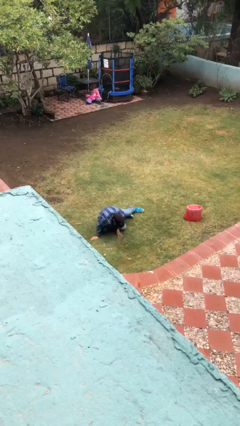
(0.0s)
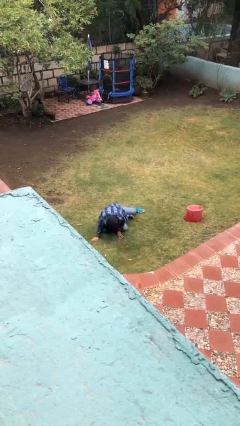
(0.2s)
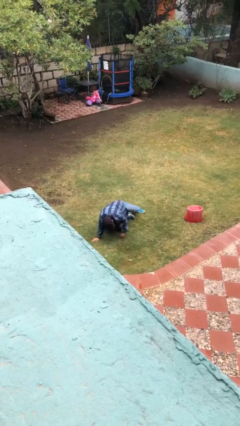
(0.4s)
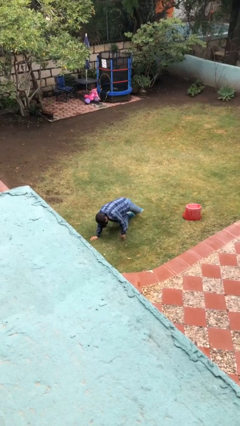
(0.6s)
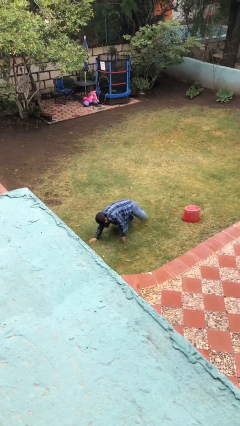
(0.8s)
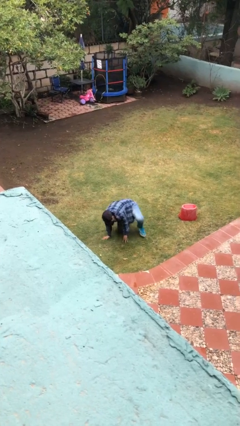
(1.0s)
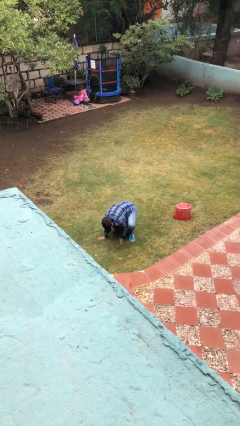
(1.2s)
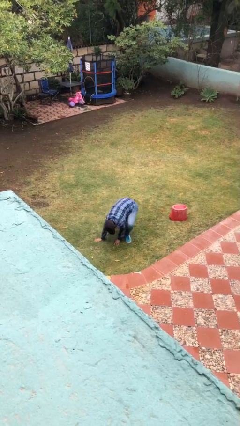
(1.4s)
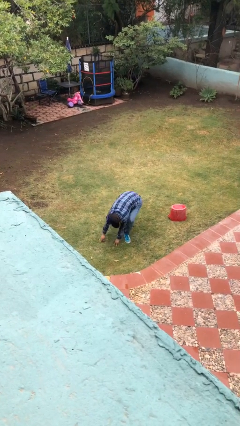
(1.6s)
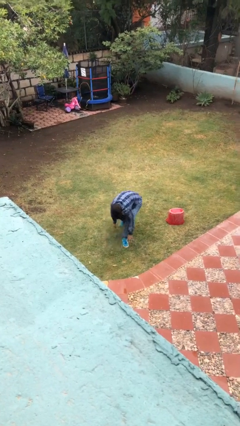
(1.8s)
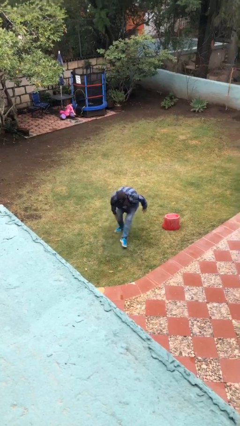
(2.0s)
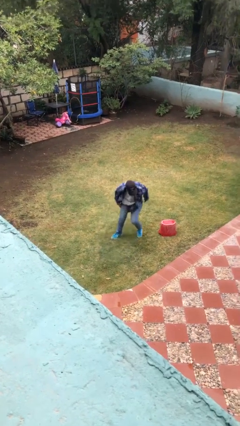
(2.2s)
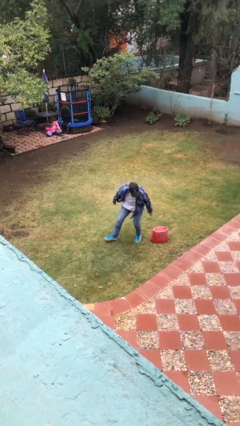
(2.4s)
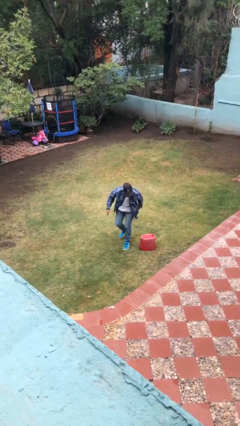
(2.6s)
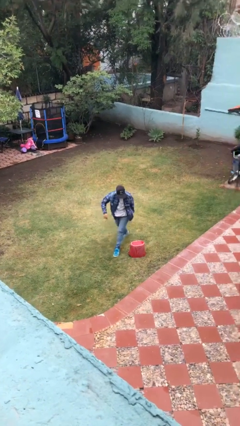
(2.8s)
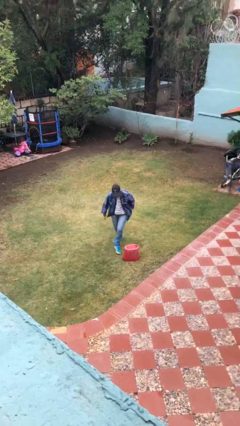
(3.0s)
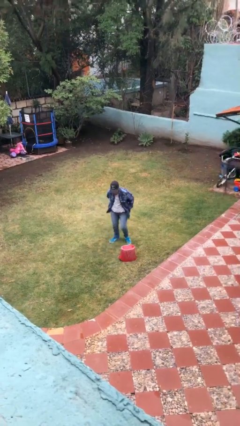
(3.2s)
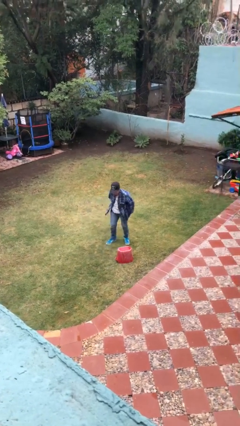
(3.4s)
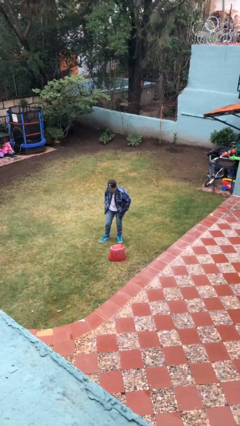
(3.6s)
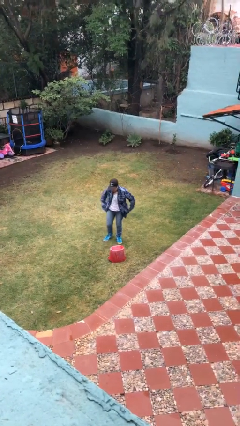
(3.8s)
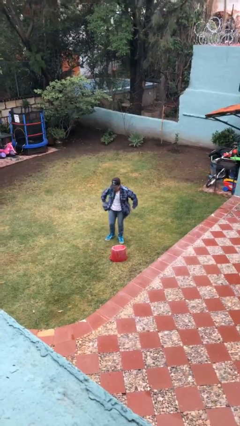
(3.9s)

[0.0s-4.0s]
person stands up from floor

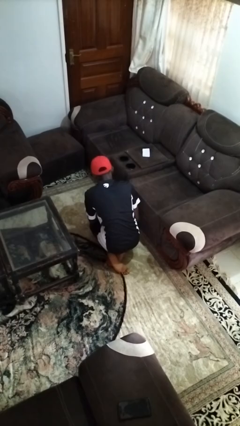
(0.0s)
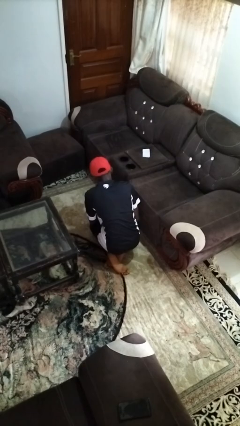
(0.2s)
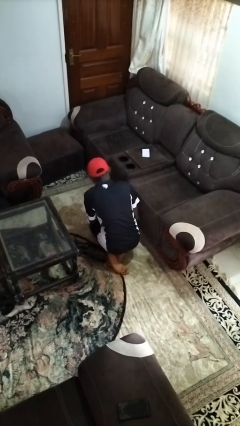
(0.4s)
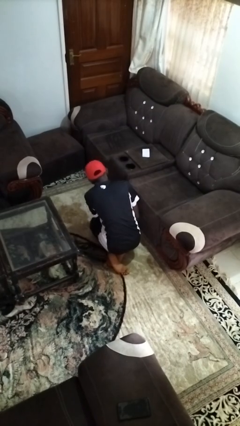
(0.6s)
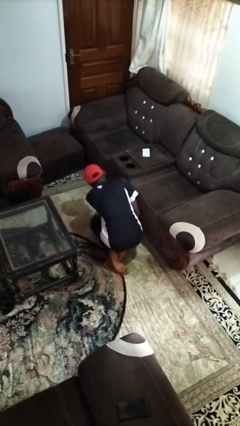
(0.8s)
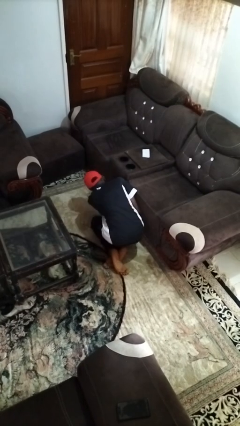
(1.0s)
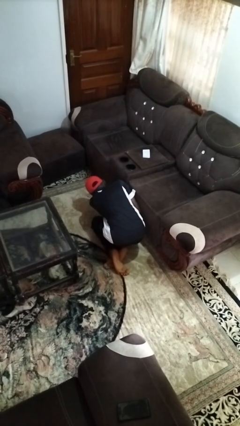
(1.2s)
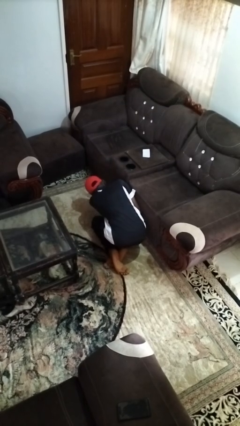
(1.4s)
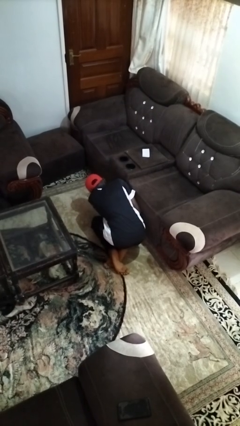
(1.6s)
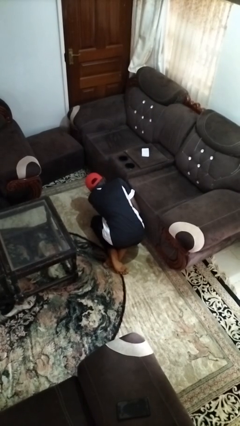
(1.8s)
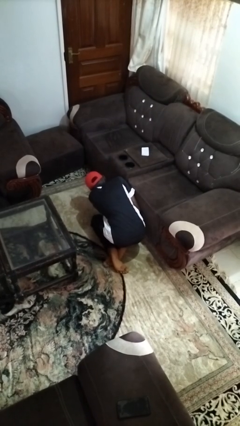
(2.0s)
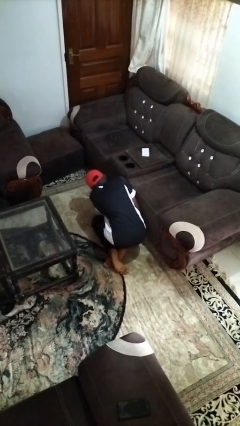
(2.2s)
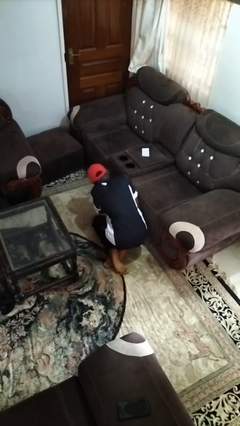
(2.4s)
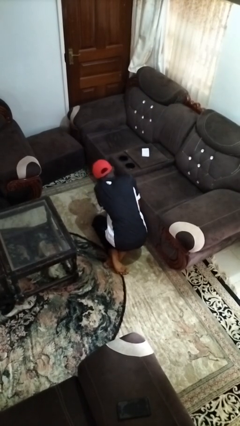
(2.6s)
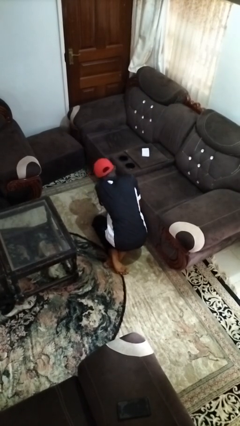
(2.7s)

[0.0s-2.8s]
person searches under couch

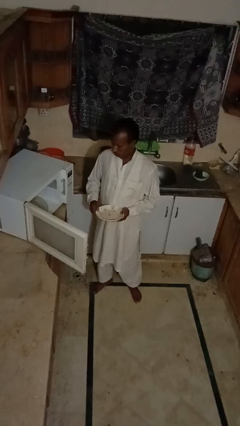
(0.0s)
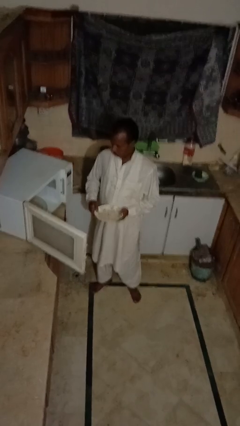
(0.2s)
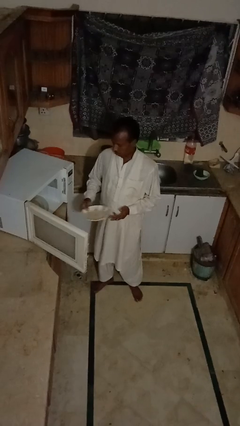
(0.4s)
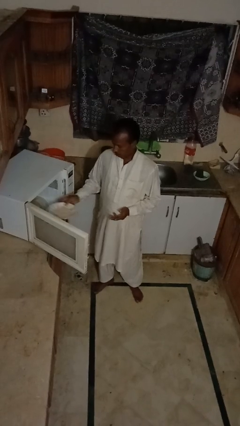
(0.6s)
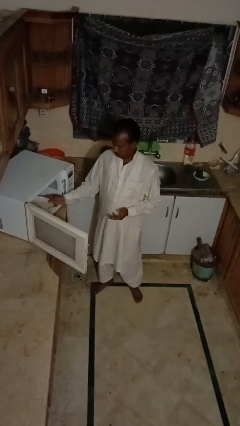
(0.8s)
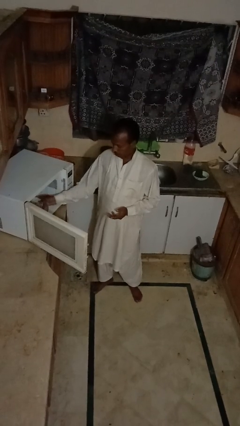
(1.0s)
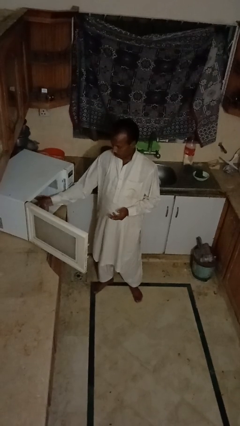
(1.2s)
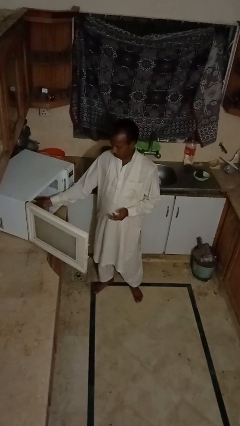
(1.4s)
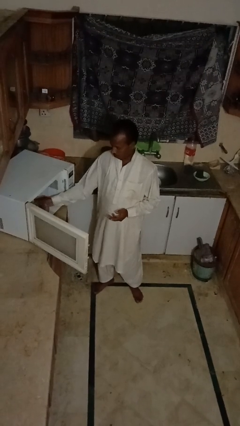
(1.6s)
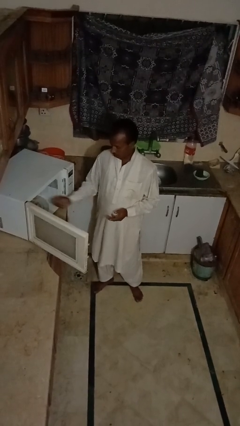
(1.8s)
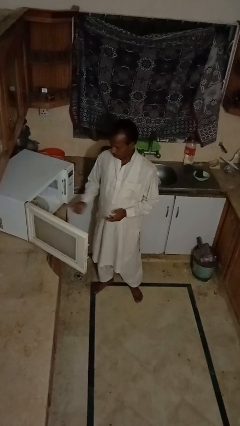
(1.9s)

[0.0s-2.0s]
person puts object into microwave

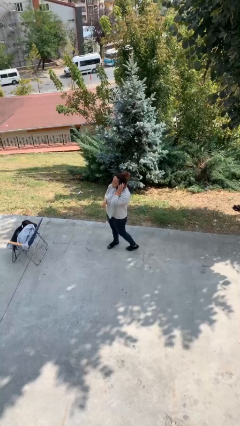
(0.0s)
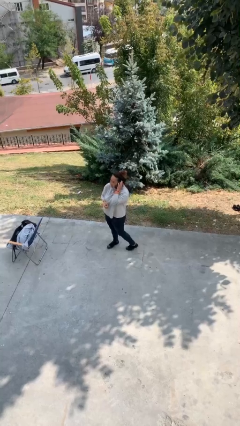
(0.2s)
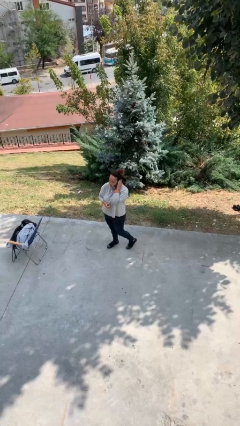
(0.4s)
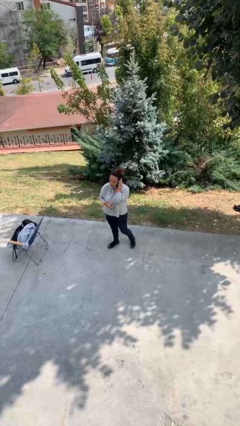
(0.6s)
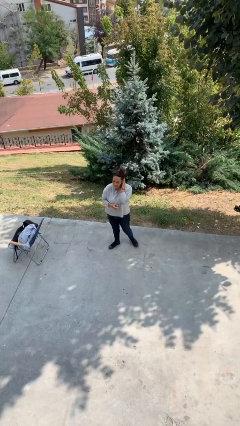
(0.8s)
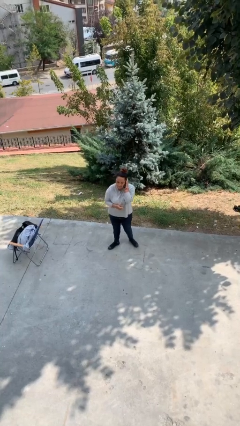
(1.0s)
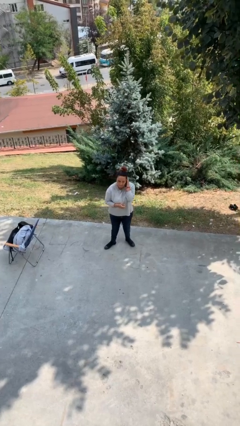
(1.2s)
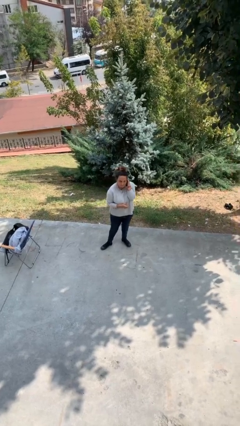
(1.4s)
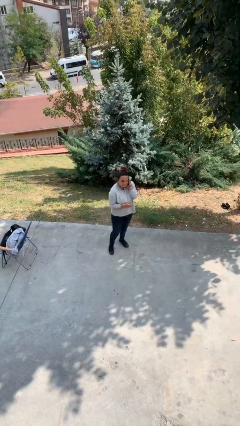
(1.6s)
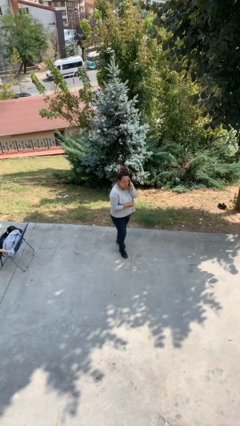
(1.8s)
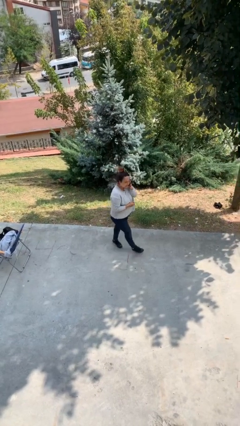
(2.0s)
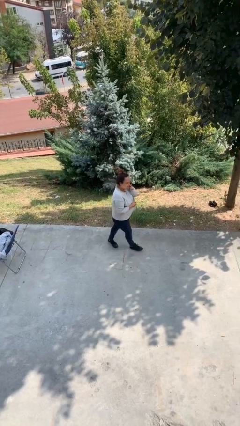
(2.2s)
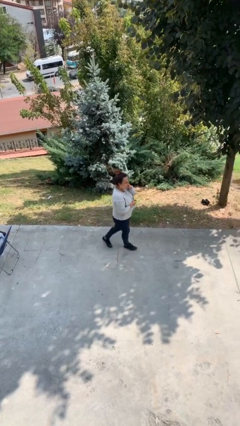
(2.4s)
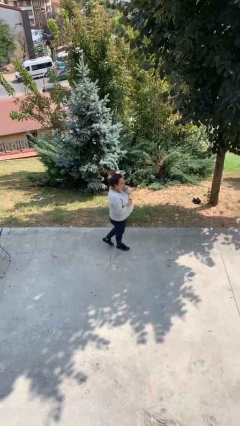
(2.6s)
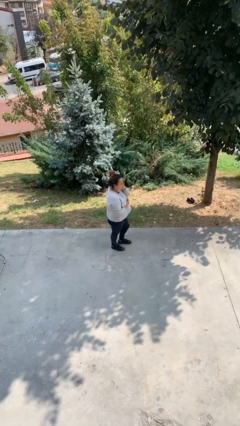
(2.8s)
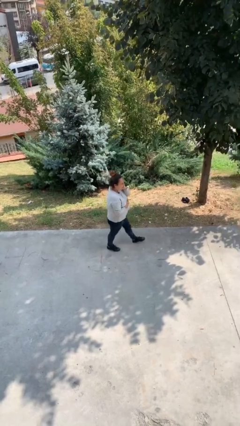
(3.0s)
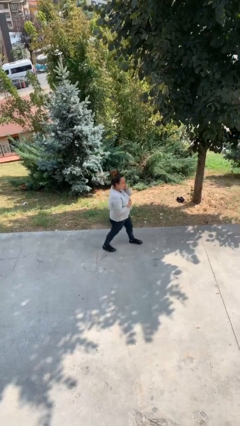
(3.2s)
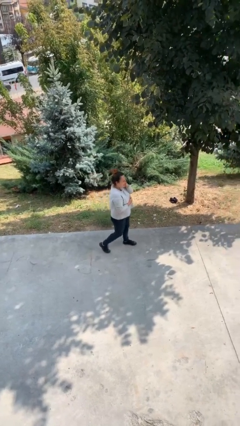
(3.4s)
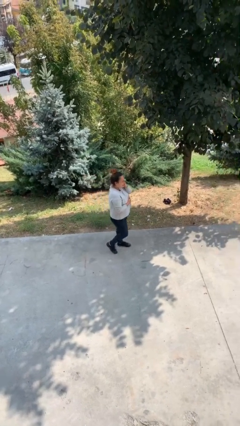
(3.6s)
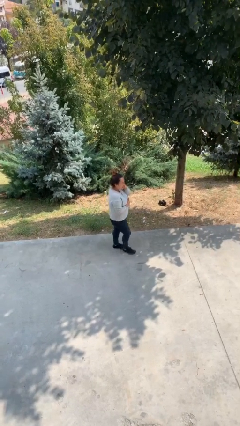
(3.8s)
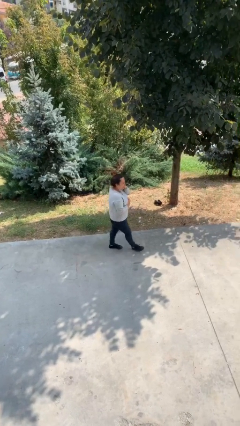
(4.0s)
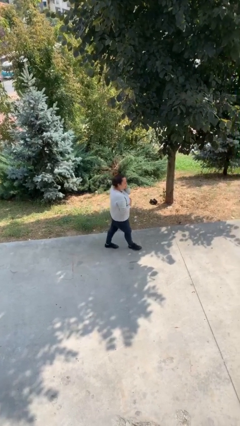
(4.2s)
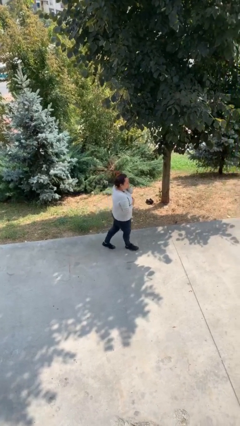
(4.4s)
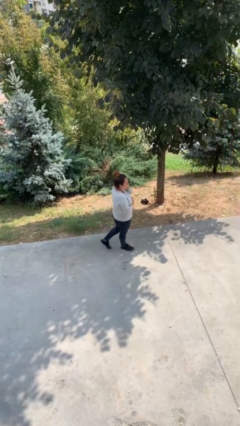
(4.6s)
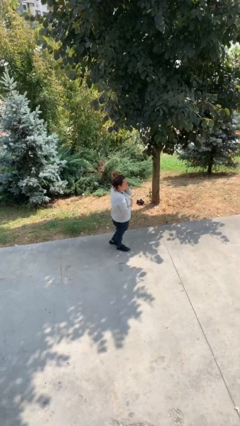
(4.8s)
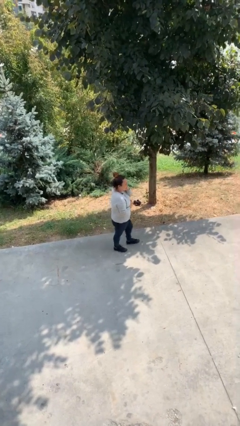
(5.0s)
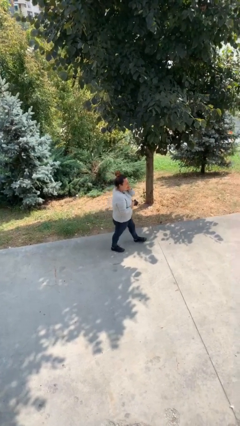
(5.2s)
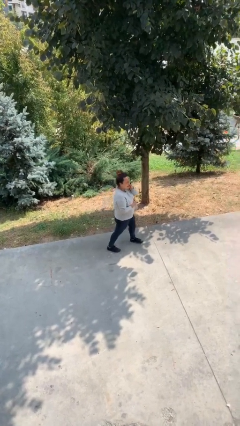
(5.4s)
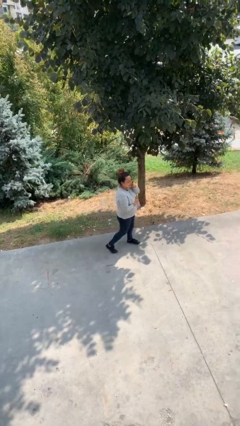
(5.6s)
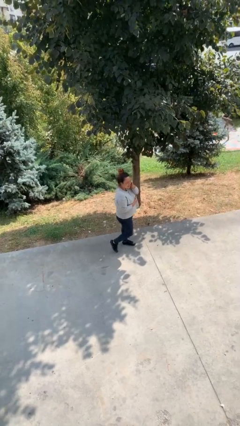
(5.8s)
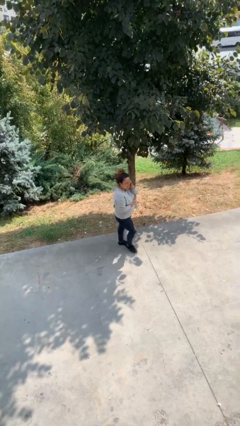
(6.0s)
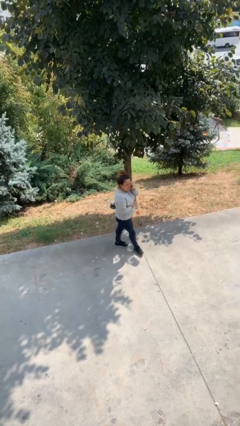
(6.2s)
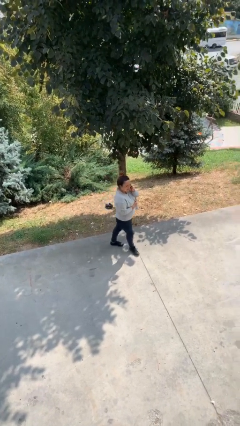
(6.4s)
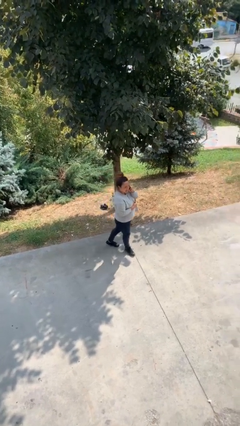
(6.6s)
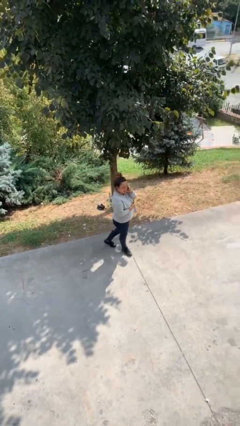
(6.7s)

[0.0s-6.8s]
person talks on phone

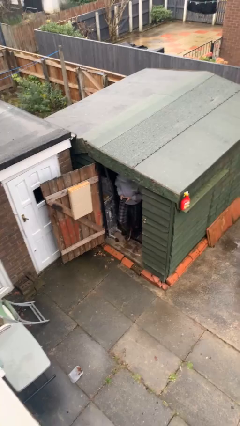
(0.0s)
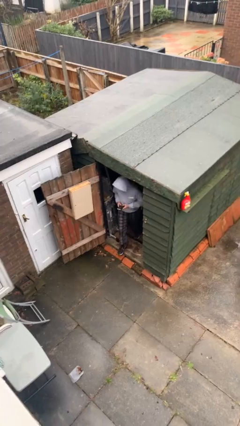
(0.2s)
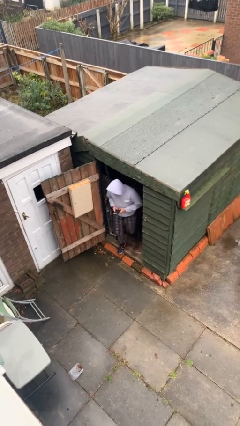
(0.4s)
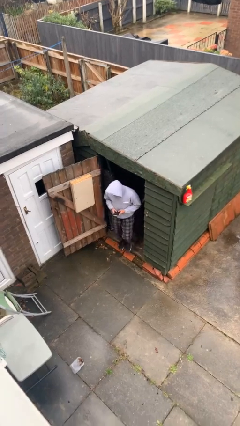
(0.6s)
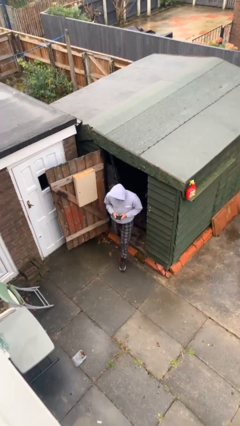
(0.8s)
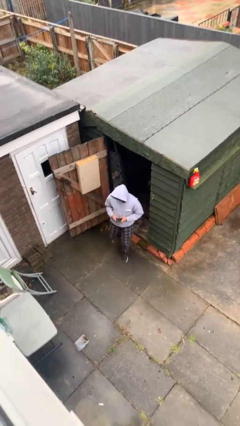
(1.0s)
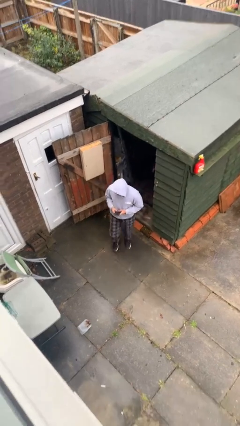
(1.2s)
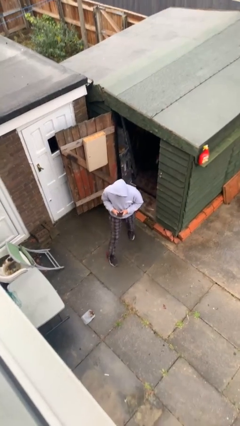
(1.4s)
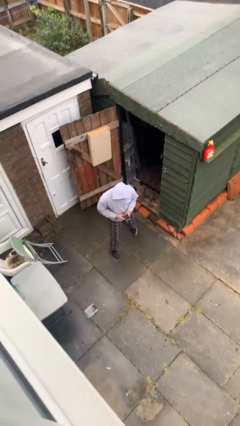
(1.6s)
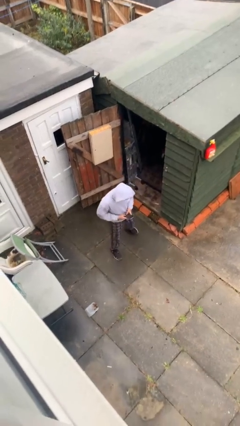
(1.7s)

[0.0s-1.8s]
person enters scene through structure

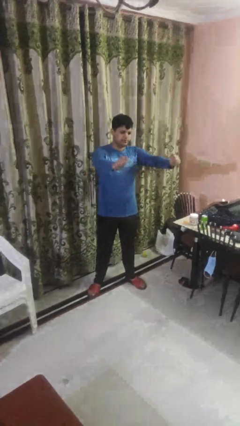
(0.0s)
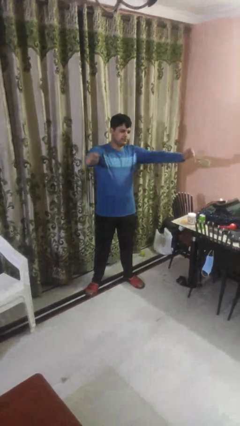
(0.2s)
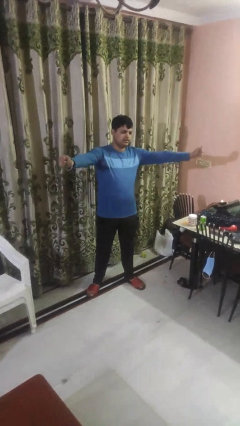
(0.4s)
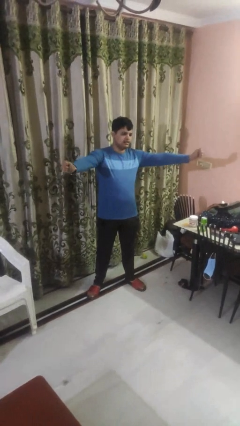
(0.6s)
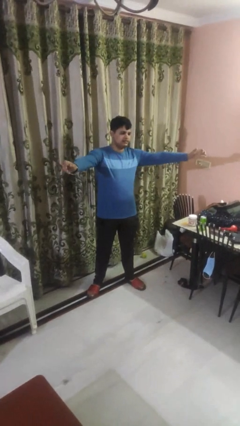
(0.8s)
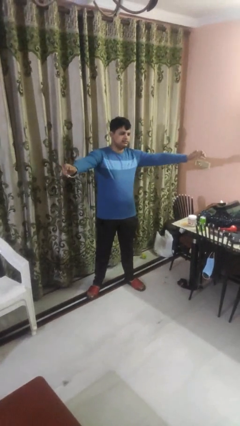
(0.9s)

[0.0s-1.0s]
person gestures zoom in
